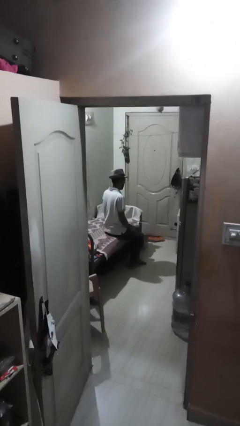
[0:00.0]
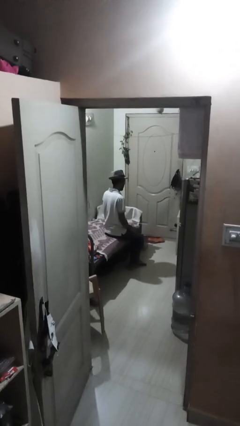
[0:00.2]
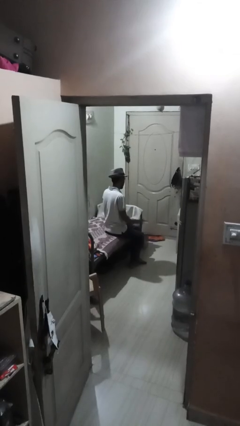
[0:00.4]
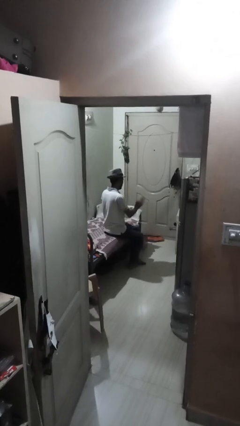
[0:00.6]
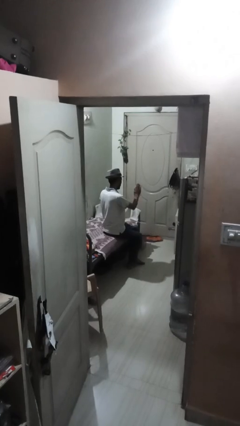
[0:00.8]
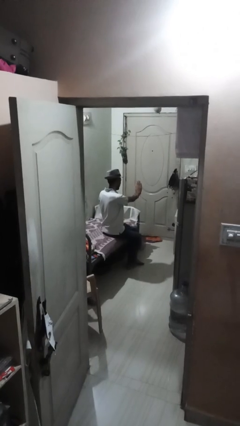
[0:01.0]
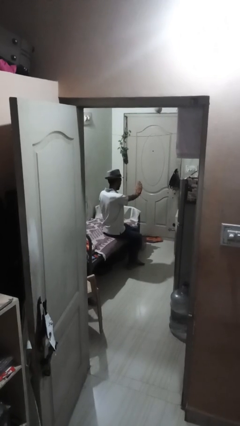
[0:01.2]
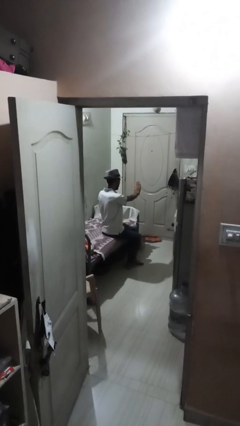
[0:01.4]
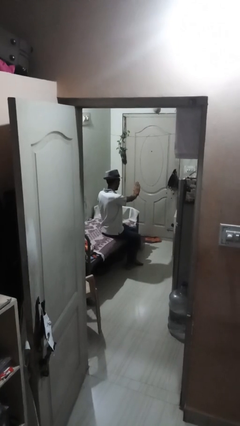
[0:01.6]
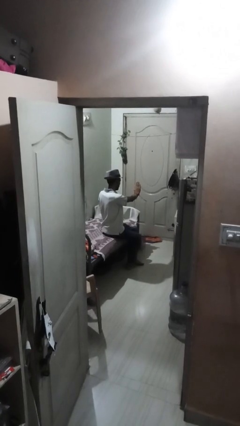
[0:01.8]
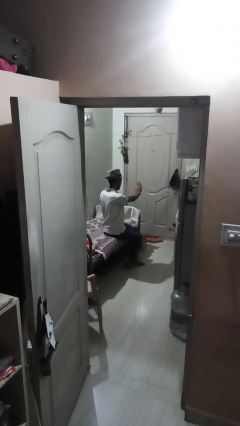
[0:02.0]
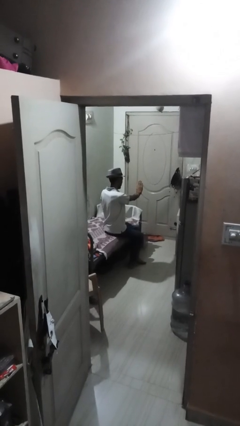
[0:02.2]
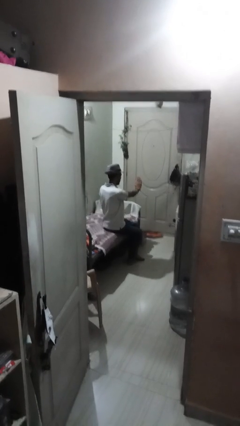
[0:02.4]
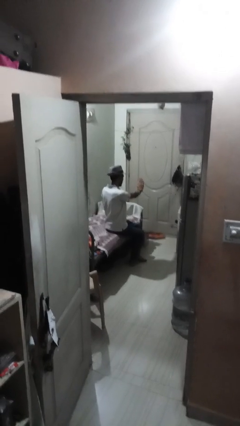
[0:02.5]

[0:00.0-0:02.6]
person gestures stop

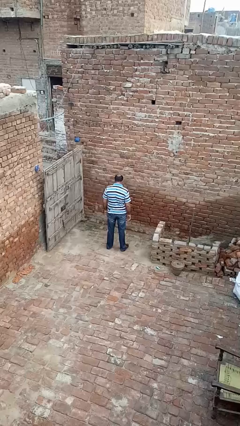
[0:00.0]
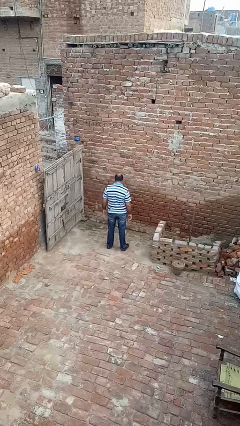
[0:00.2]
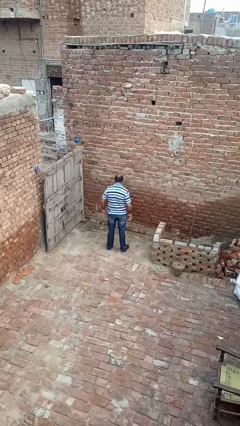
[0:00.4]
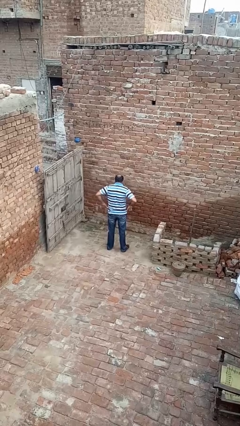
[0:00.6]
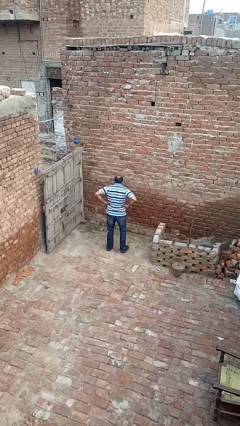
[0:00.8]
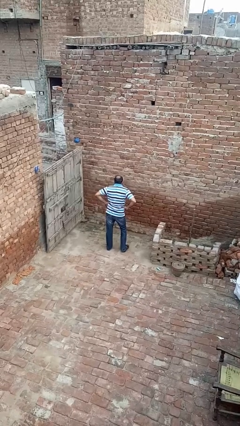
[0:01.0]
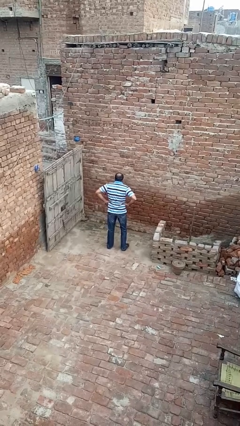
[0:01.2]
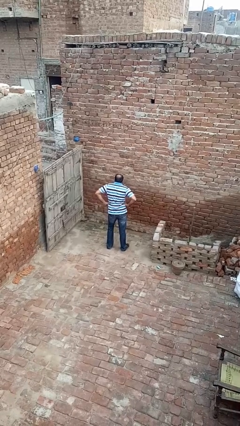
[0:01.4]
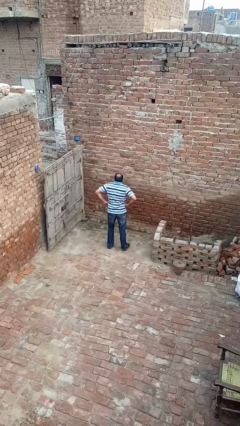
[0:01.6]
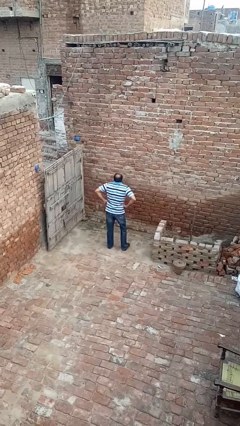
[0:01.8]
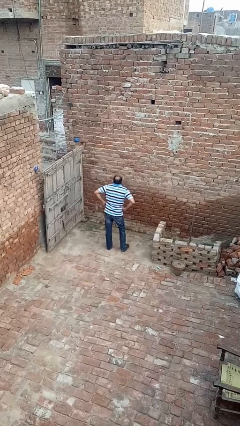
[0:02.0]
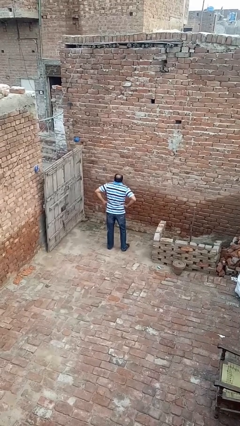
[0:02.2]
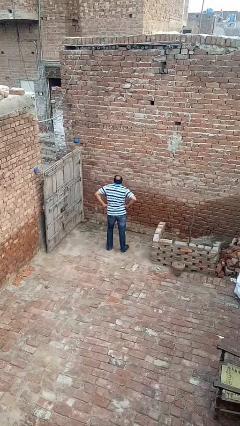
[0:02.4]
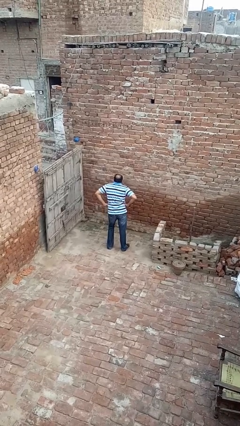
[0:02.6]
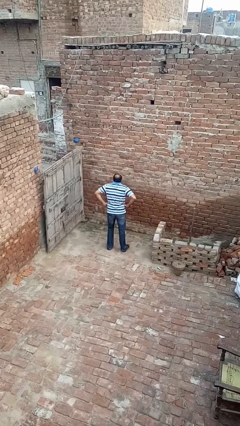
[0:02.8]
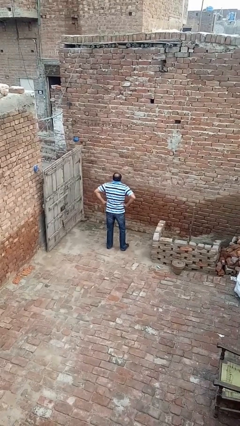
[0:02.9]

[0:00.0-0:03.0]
person wiggles hips

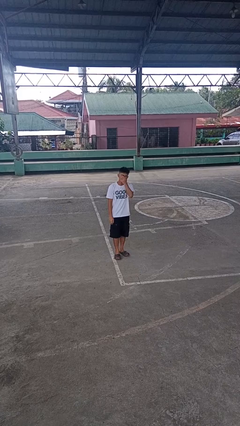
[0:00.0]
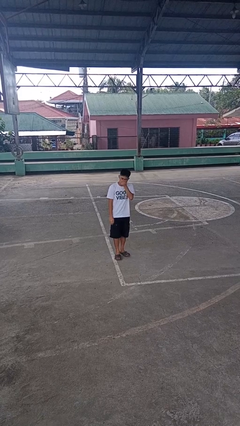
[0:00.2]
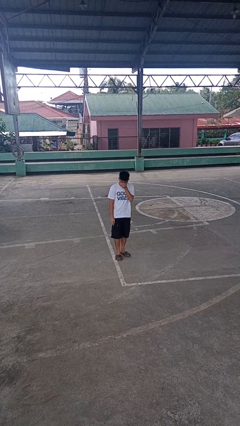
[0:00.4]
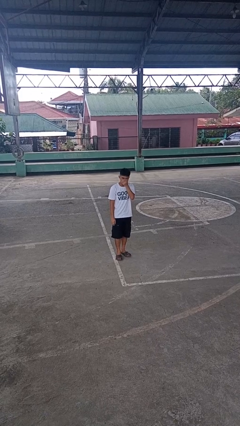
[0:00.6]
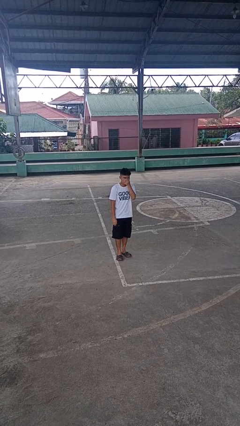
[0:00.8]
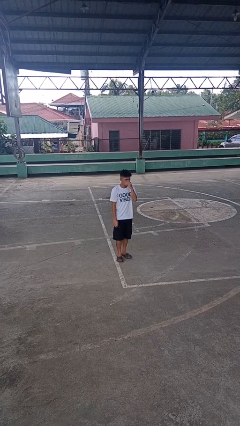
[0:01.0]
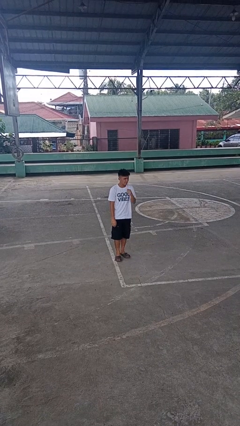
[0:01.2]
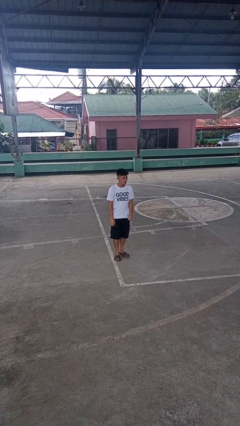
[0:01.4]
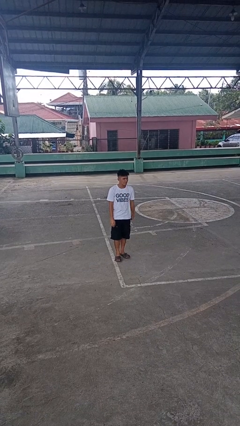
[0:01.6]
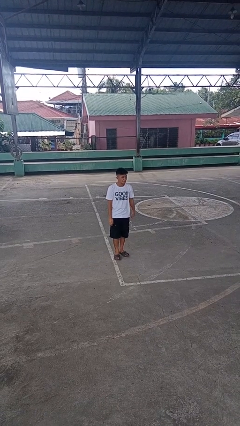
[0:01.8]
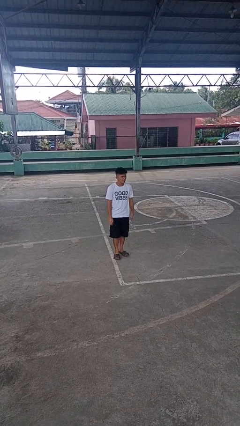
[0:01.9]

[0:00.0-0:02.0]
person sneezes into hand

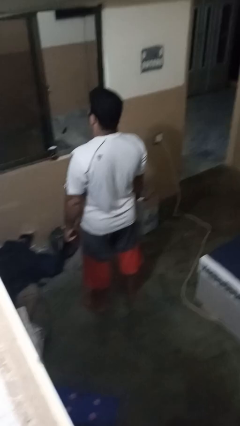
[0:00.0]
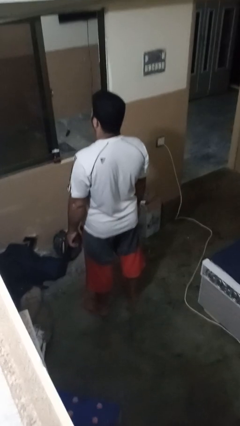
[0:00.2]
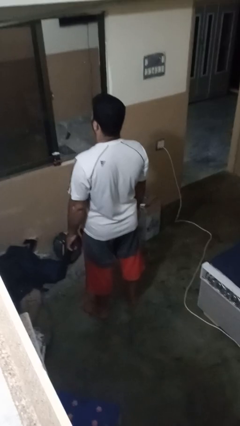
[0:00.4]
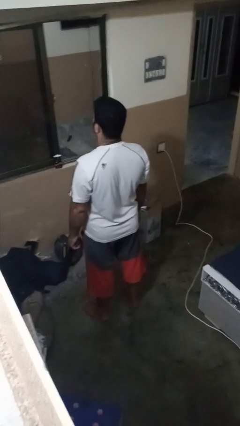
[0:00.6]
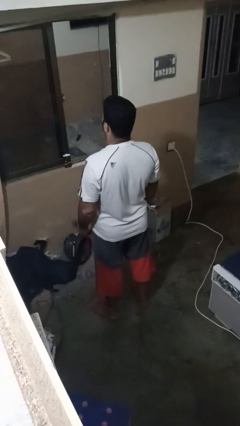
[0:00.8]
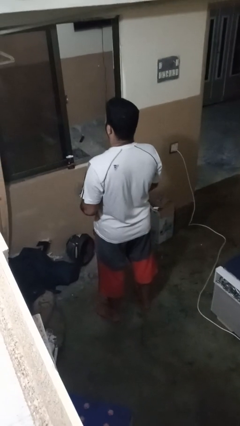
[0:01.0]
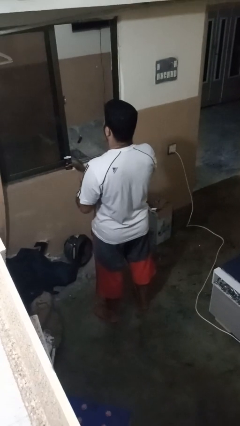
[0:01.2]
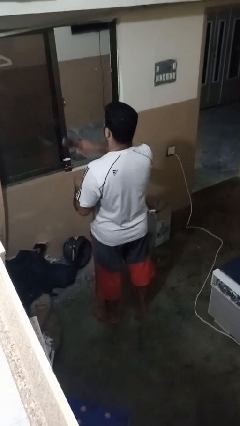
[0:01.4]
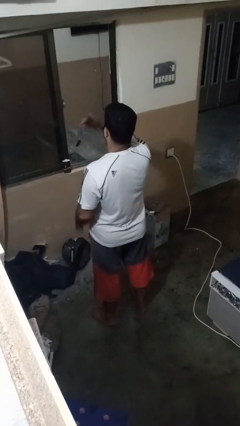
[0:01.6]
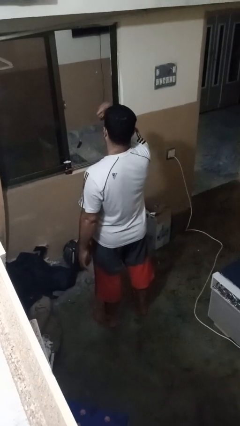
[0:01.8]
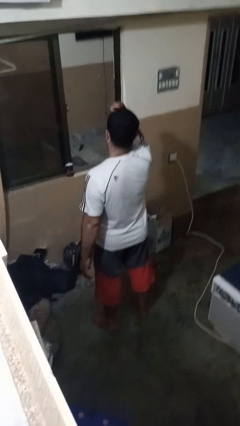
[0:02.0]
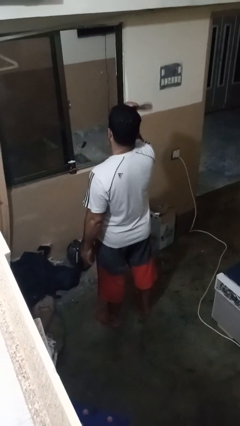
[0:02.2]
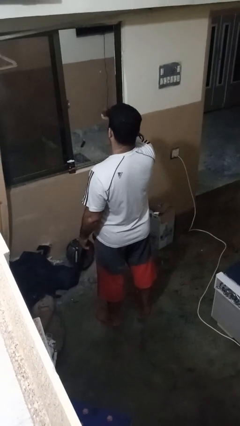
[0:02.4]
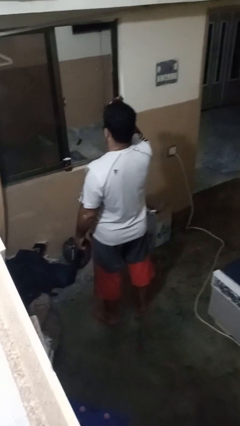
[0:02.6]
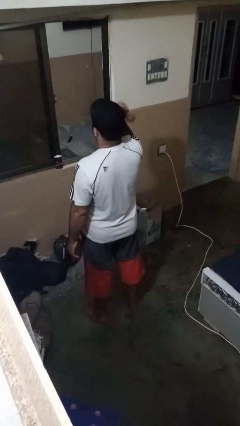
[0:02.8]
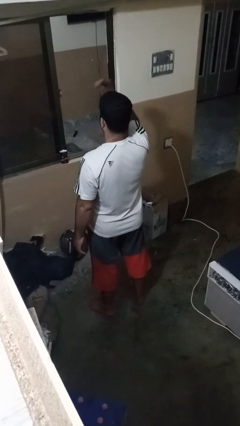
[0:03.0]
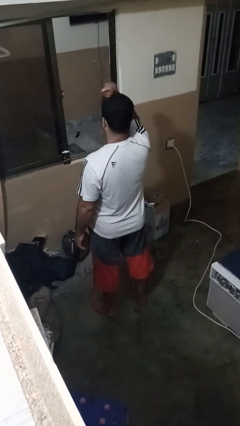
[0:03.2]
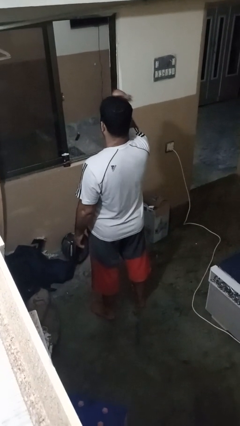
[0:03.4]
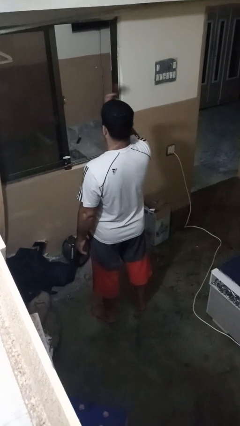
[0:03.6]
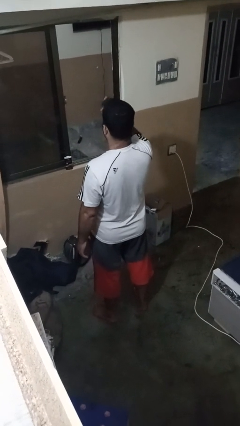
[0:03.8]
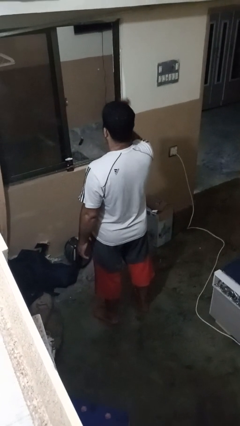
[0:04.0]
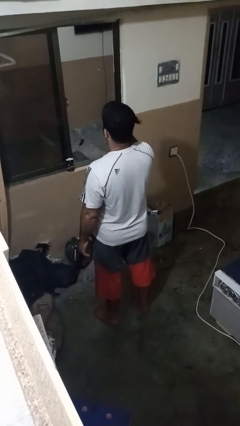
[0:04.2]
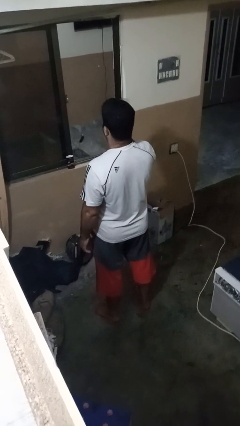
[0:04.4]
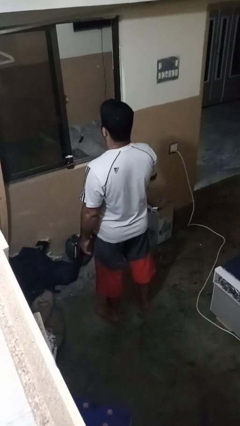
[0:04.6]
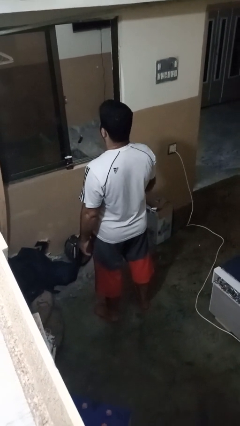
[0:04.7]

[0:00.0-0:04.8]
person brushes hair

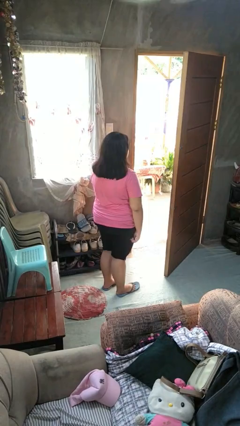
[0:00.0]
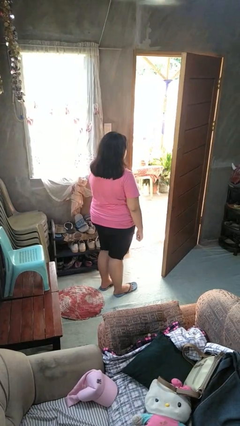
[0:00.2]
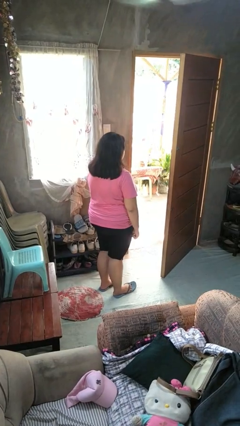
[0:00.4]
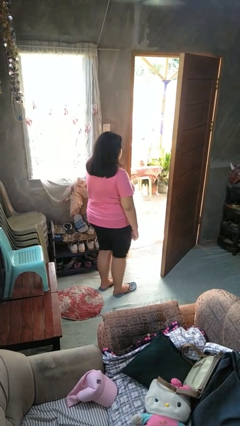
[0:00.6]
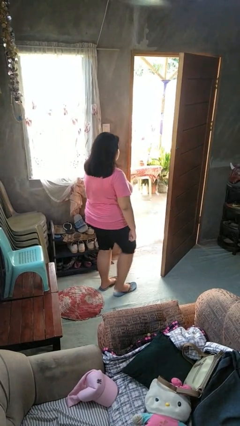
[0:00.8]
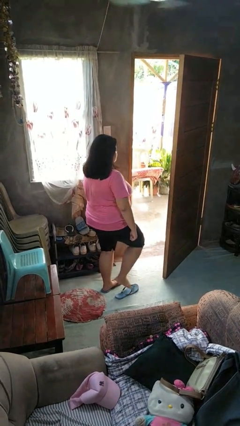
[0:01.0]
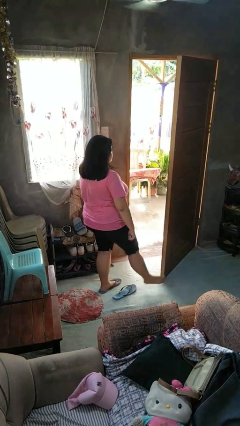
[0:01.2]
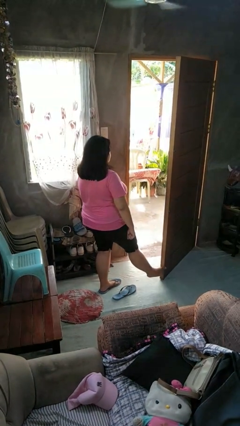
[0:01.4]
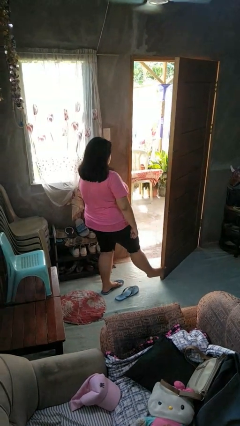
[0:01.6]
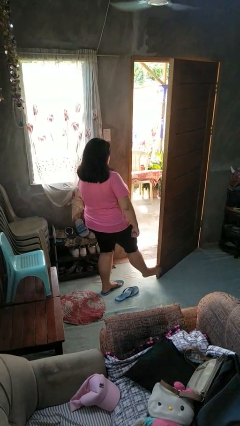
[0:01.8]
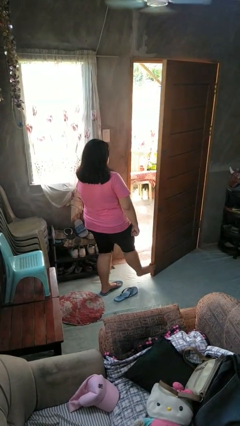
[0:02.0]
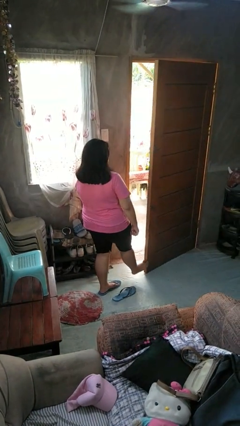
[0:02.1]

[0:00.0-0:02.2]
person closes door with foot

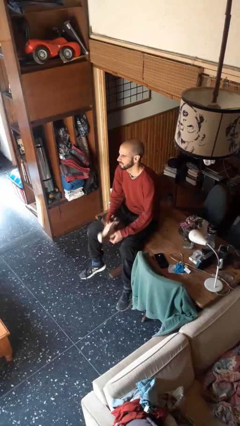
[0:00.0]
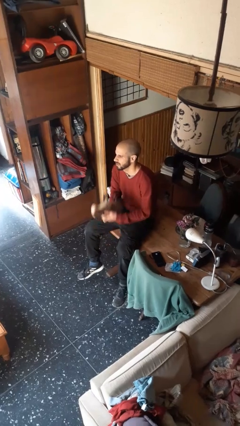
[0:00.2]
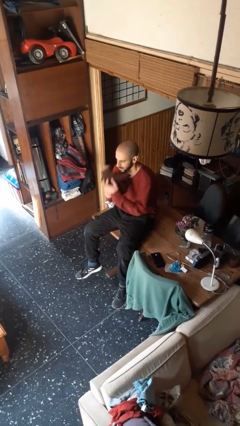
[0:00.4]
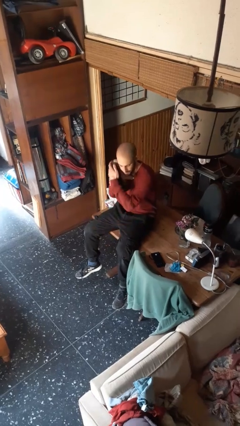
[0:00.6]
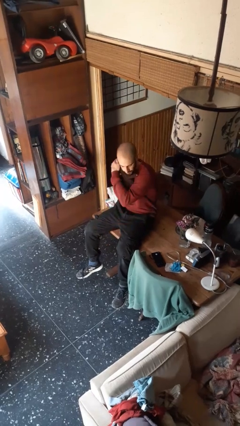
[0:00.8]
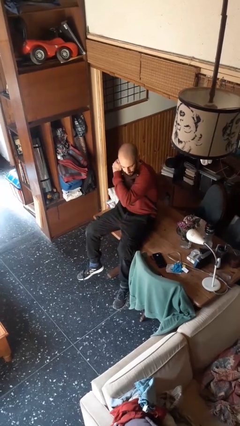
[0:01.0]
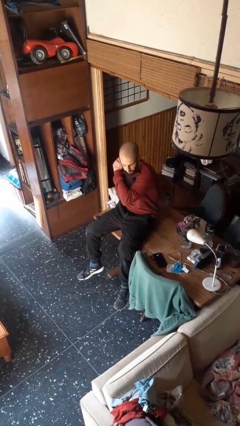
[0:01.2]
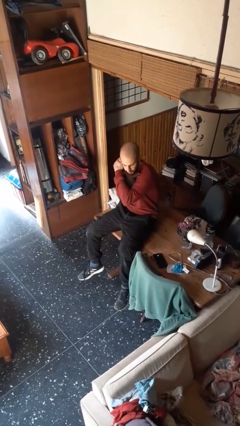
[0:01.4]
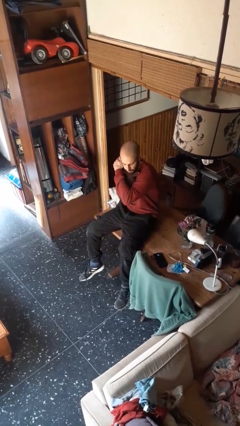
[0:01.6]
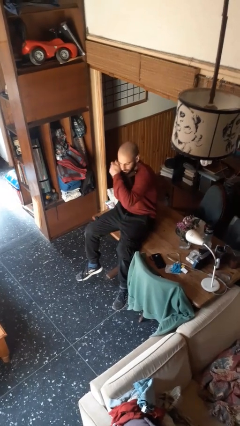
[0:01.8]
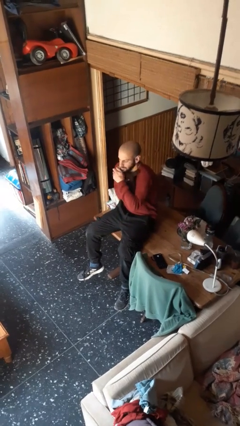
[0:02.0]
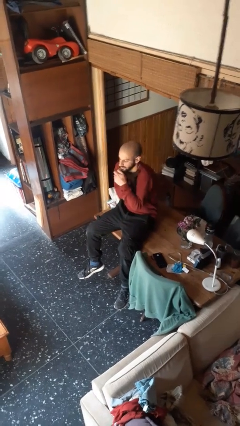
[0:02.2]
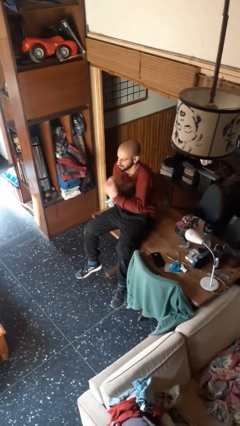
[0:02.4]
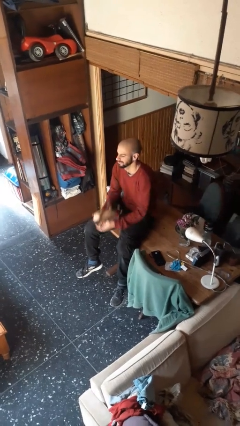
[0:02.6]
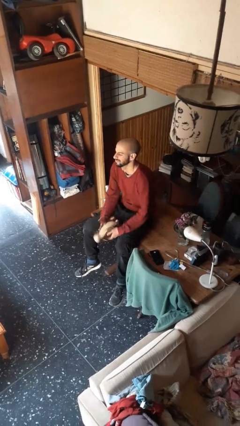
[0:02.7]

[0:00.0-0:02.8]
person hugs stuffed animal
